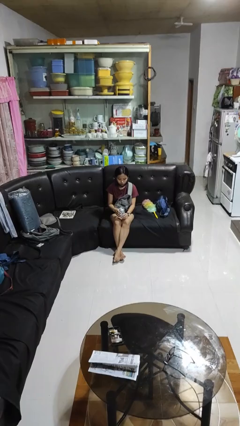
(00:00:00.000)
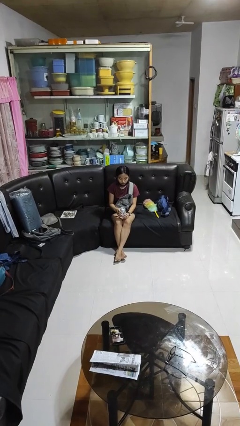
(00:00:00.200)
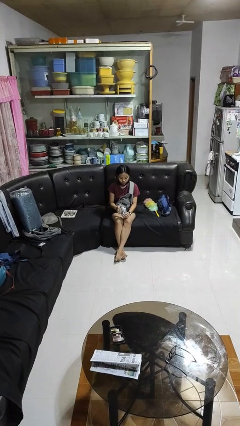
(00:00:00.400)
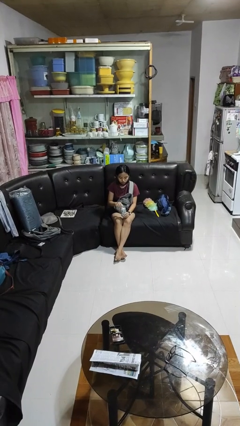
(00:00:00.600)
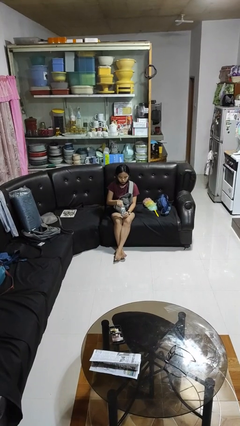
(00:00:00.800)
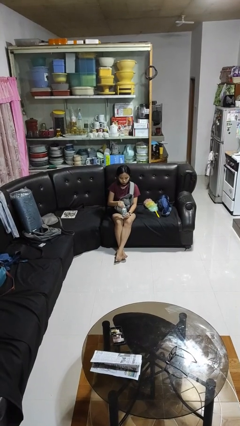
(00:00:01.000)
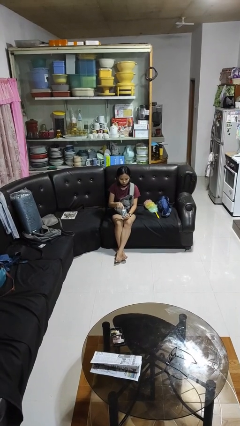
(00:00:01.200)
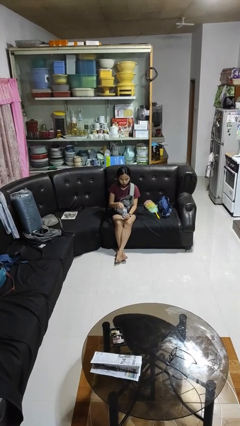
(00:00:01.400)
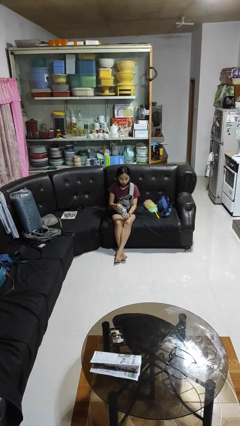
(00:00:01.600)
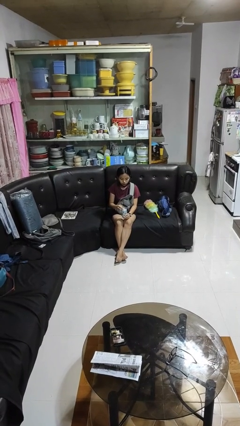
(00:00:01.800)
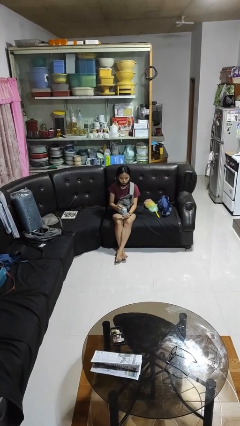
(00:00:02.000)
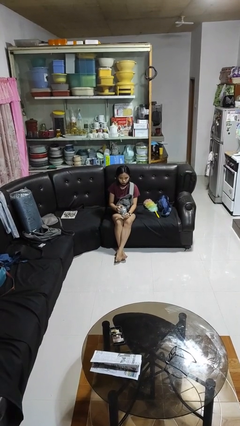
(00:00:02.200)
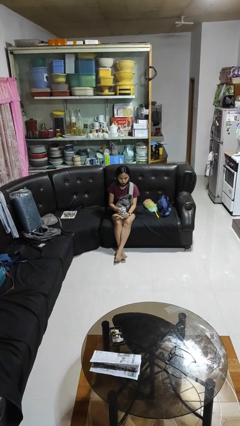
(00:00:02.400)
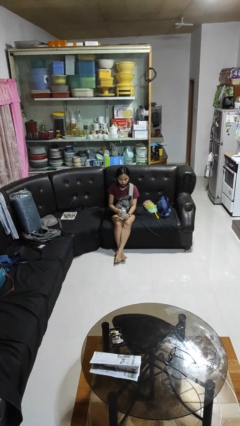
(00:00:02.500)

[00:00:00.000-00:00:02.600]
person opens beverage can

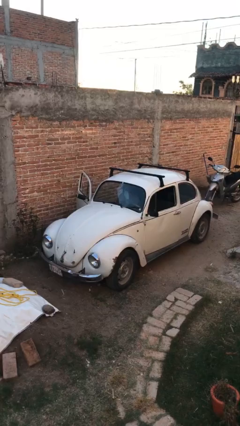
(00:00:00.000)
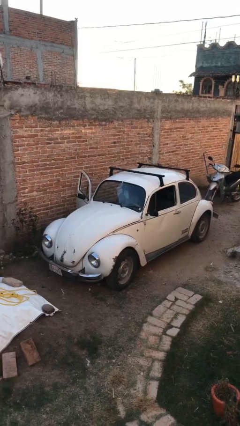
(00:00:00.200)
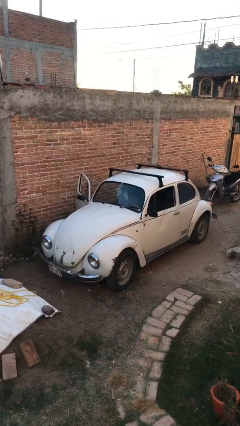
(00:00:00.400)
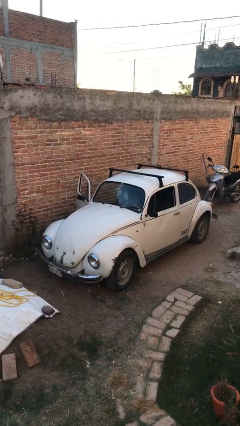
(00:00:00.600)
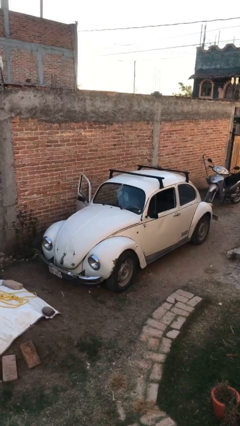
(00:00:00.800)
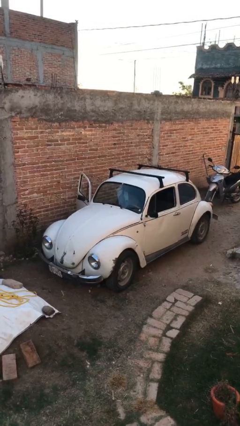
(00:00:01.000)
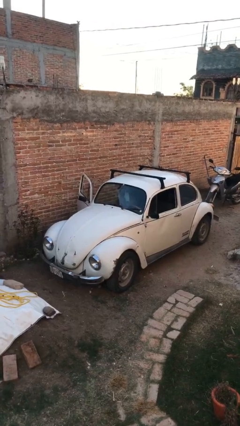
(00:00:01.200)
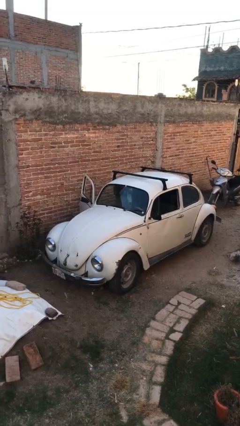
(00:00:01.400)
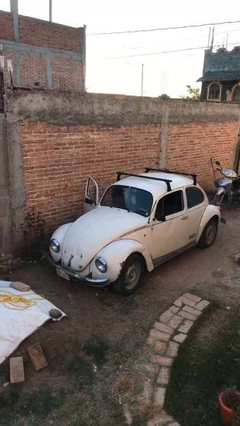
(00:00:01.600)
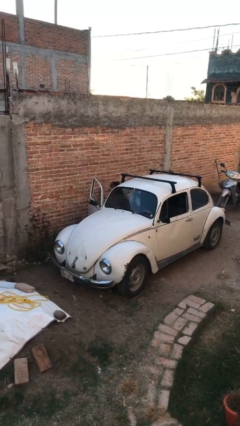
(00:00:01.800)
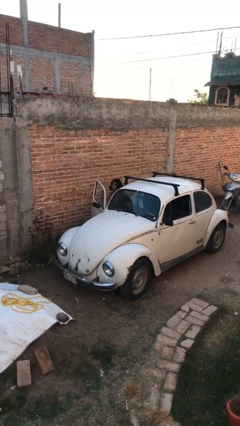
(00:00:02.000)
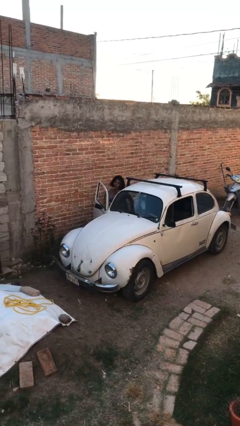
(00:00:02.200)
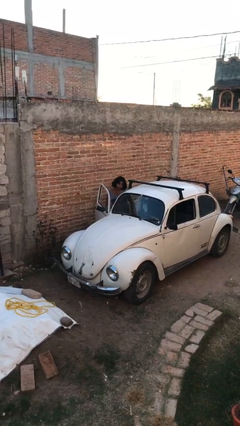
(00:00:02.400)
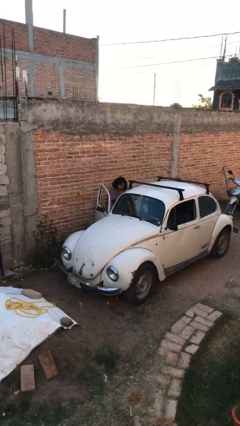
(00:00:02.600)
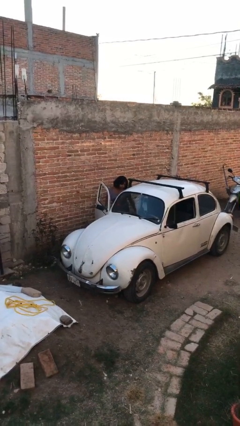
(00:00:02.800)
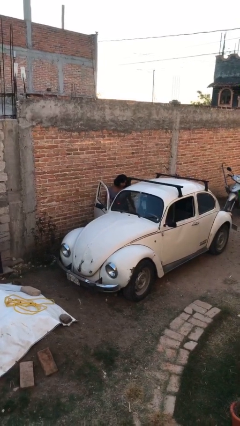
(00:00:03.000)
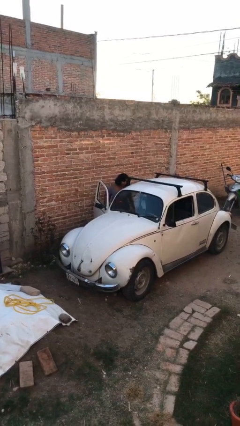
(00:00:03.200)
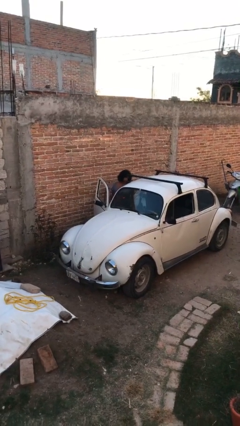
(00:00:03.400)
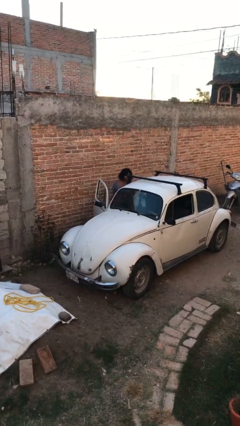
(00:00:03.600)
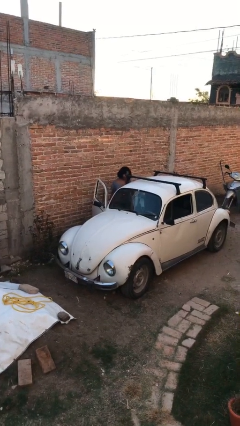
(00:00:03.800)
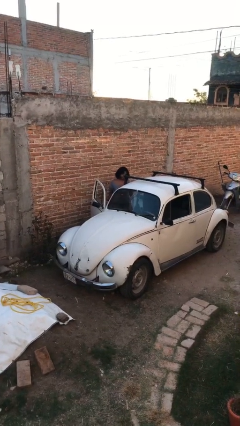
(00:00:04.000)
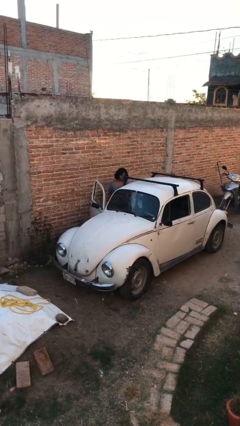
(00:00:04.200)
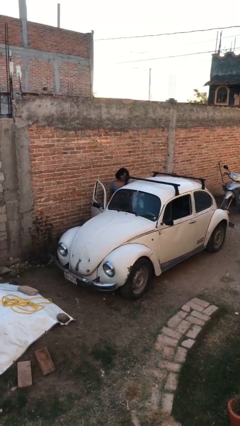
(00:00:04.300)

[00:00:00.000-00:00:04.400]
person exits car

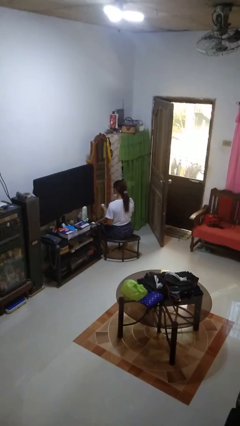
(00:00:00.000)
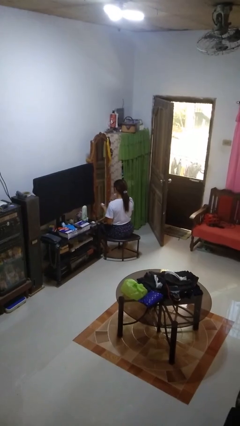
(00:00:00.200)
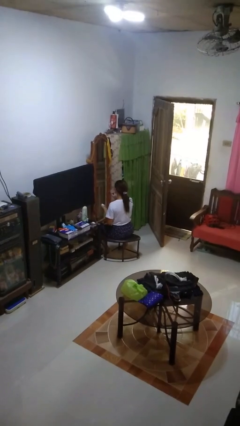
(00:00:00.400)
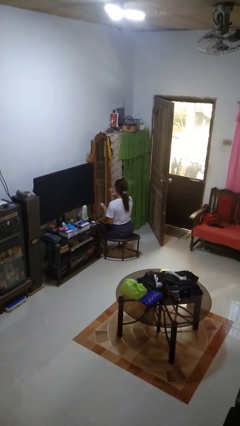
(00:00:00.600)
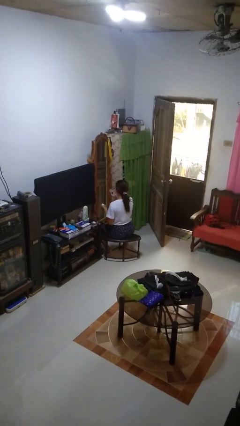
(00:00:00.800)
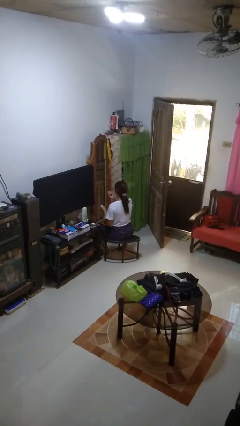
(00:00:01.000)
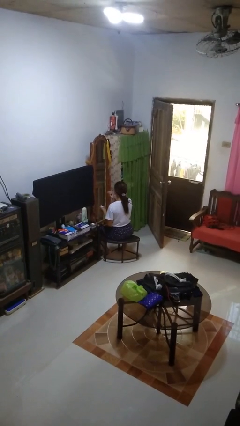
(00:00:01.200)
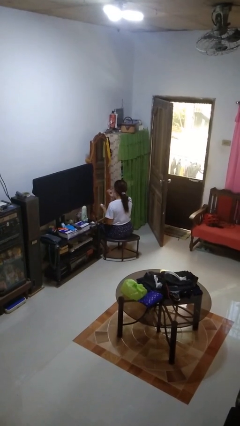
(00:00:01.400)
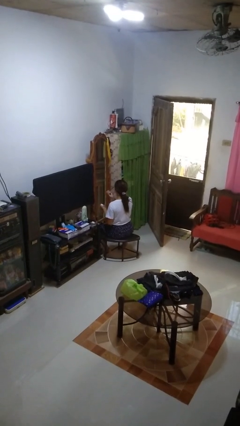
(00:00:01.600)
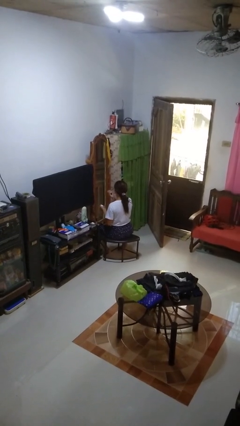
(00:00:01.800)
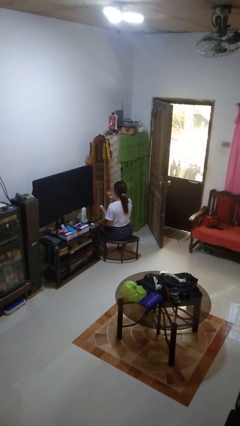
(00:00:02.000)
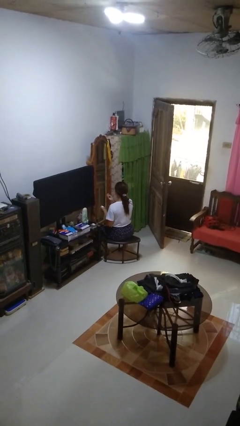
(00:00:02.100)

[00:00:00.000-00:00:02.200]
person applies eye makeup

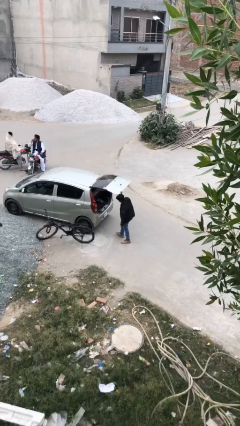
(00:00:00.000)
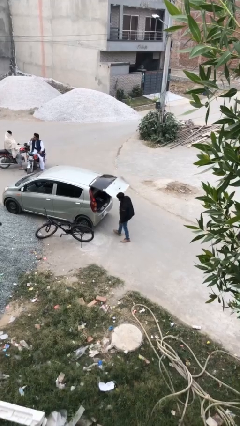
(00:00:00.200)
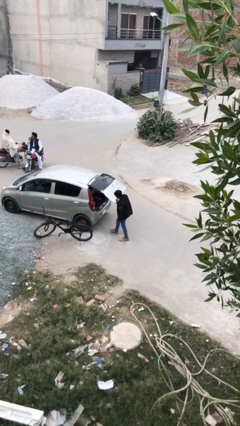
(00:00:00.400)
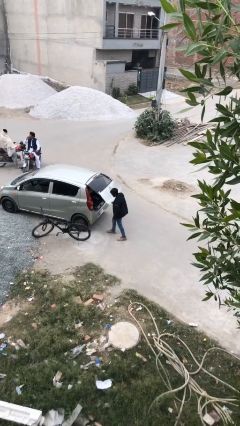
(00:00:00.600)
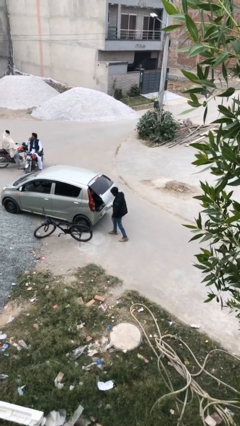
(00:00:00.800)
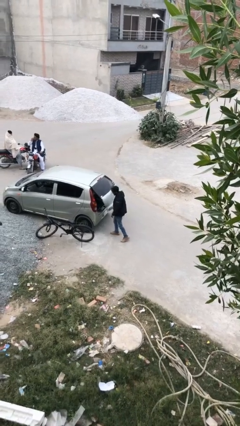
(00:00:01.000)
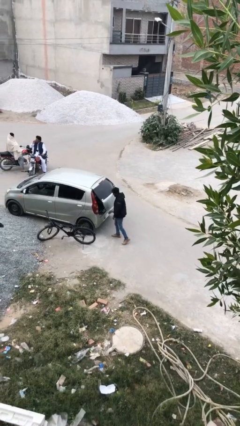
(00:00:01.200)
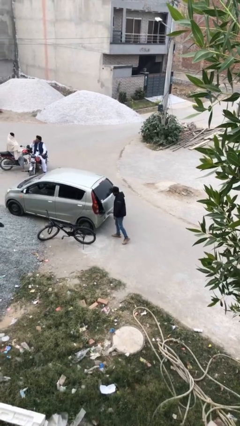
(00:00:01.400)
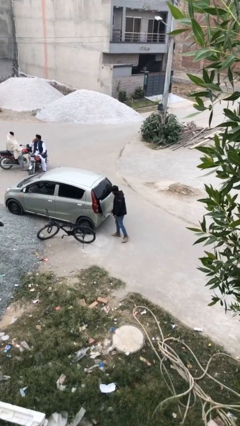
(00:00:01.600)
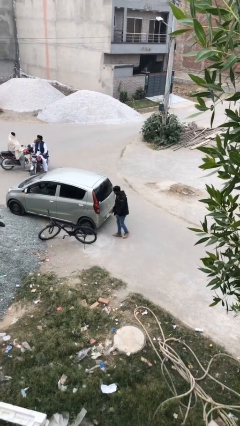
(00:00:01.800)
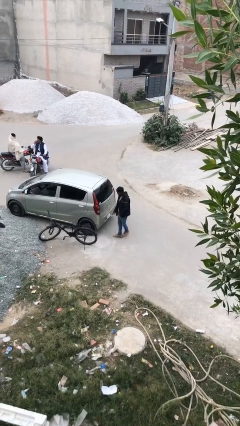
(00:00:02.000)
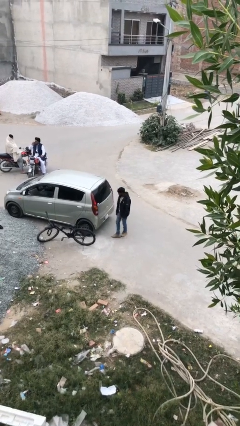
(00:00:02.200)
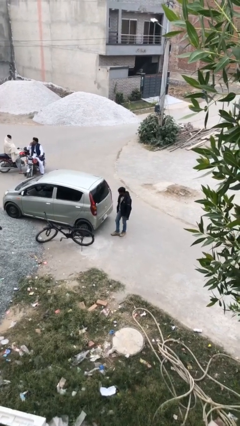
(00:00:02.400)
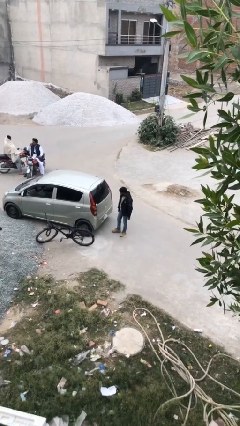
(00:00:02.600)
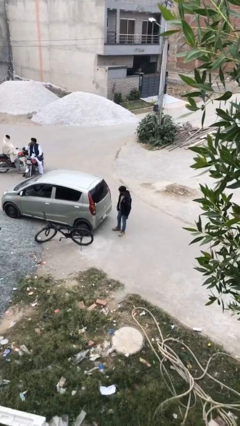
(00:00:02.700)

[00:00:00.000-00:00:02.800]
person closes car trunk

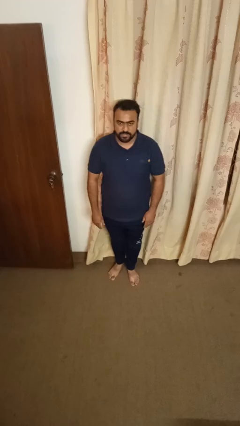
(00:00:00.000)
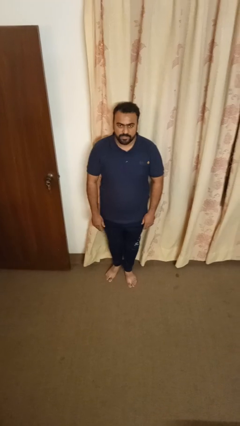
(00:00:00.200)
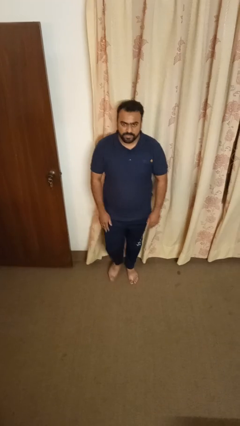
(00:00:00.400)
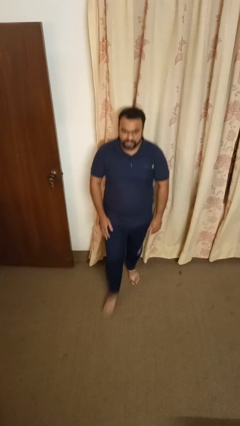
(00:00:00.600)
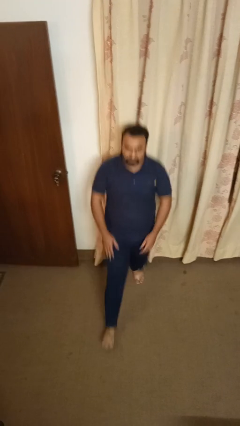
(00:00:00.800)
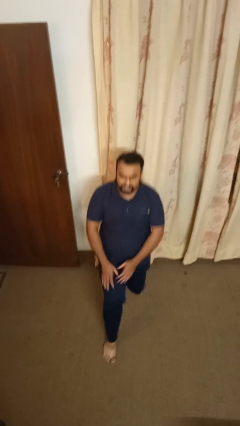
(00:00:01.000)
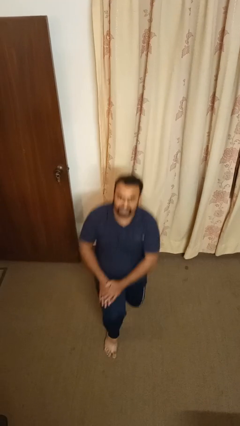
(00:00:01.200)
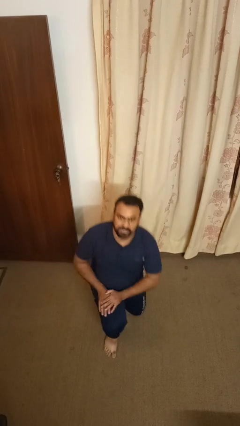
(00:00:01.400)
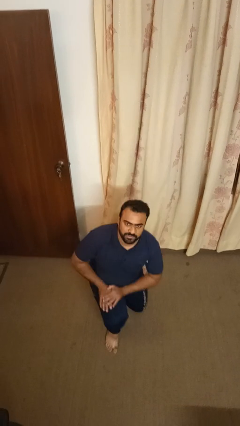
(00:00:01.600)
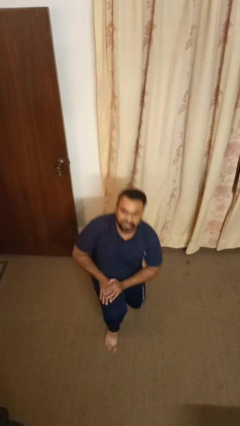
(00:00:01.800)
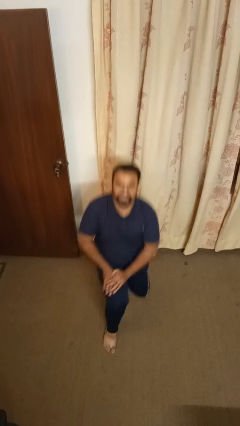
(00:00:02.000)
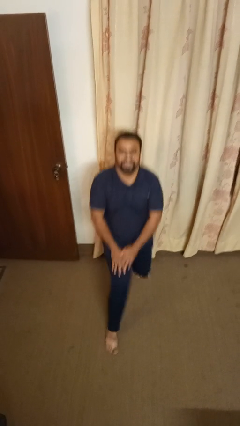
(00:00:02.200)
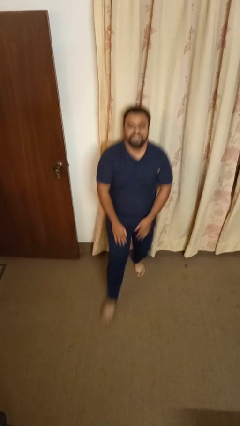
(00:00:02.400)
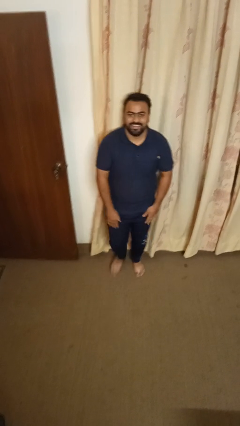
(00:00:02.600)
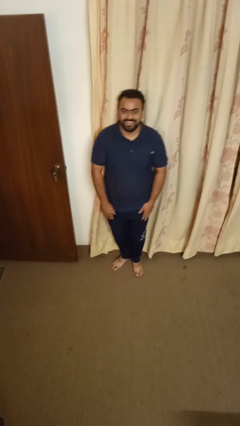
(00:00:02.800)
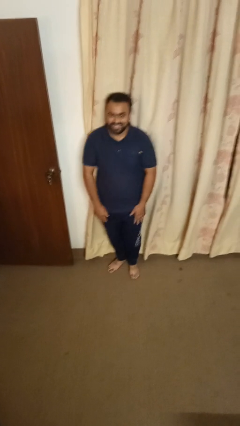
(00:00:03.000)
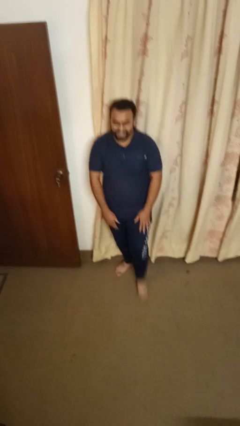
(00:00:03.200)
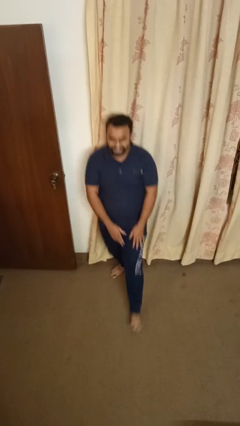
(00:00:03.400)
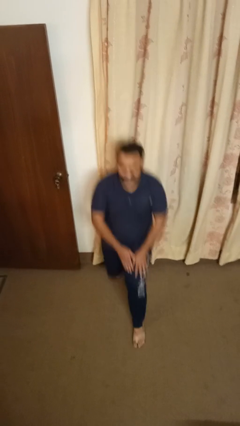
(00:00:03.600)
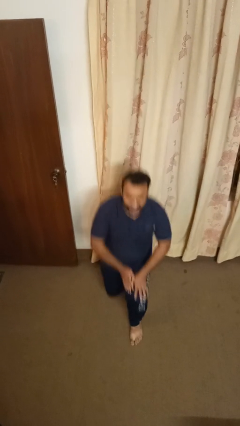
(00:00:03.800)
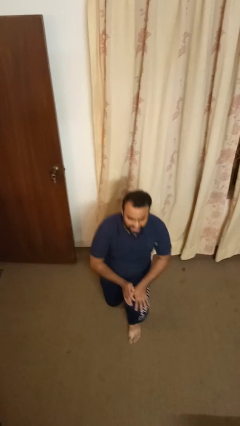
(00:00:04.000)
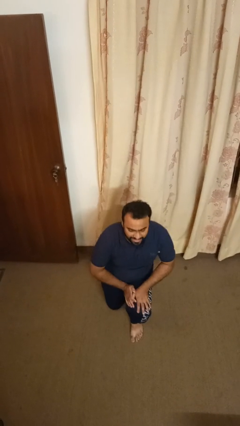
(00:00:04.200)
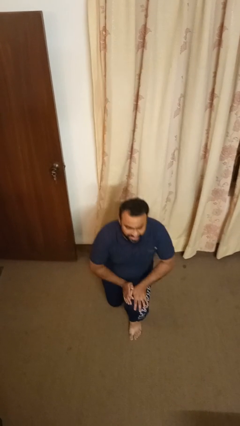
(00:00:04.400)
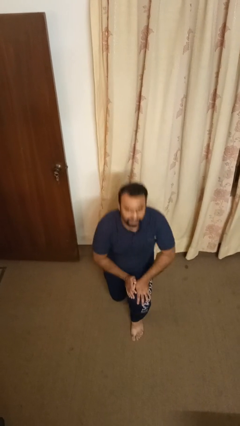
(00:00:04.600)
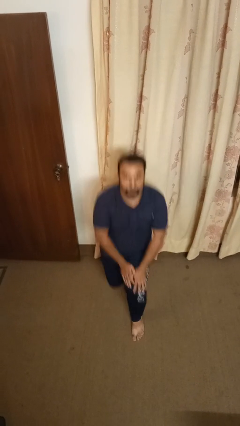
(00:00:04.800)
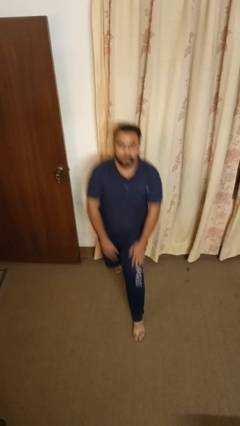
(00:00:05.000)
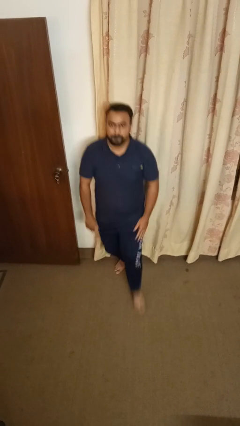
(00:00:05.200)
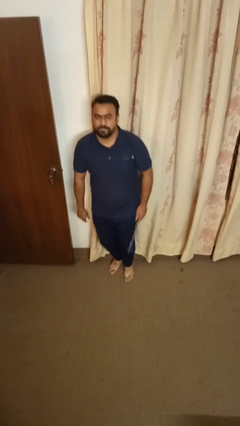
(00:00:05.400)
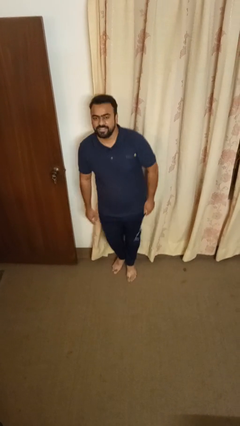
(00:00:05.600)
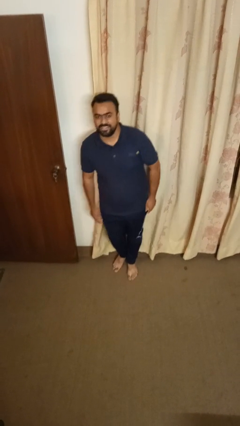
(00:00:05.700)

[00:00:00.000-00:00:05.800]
person exercises with lunges
